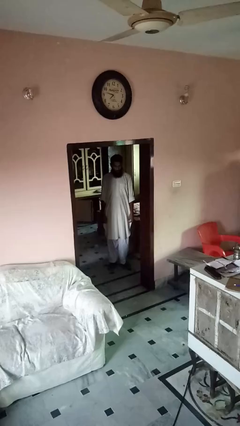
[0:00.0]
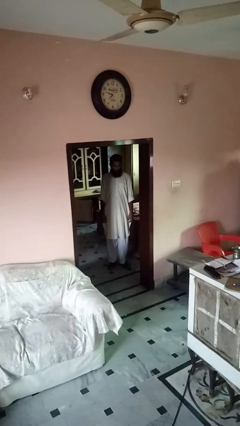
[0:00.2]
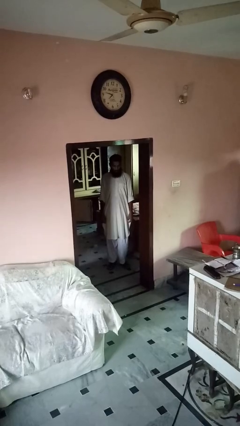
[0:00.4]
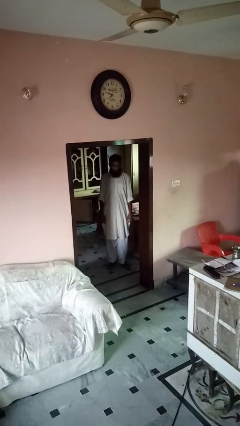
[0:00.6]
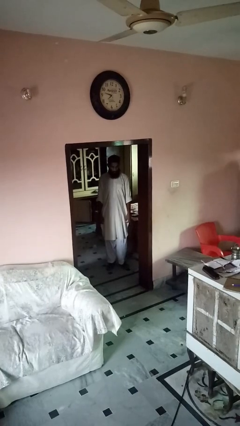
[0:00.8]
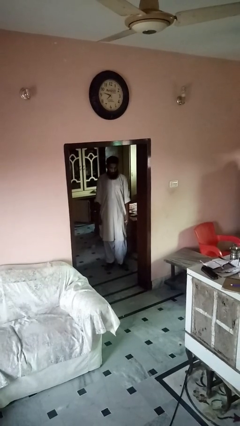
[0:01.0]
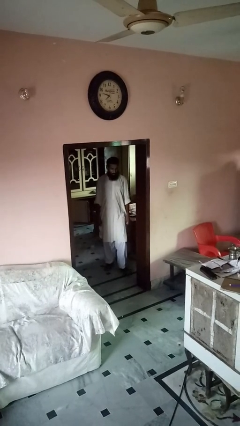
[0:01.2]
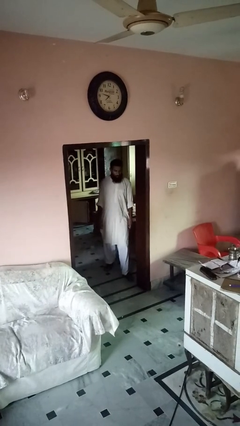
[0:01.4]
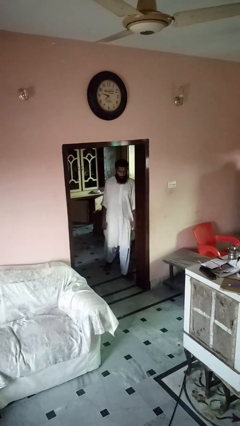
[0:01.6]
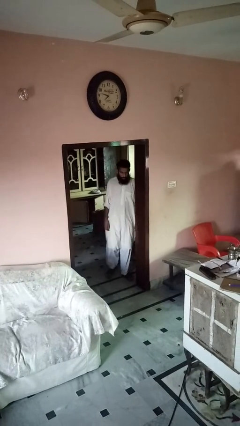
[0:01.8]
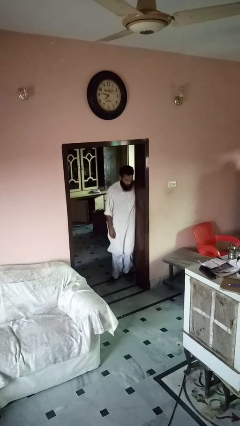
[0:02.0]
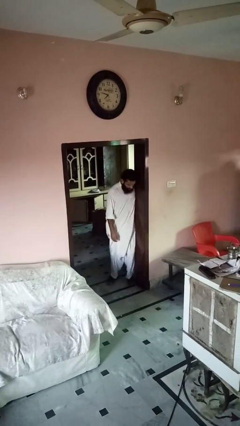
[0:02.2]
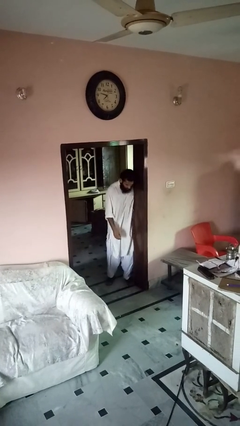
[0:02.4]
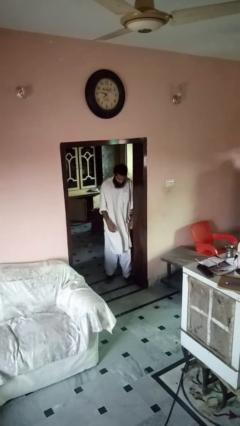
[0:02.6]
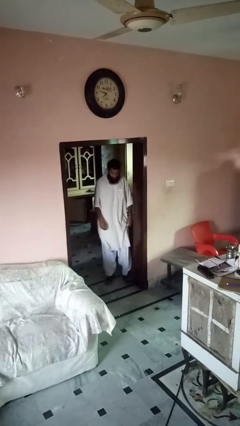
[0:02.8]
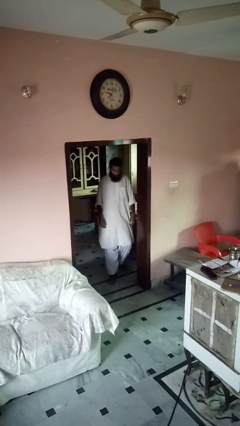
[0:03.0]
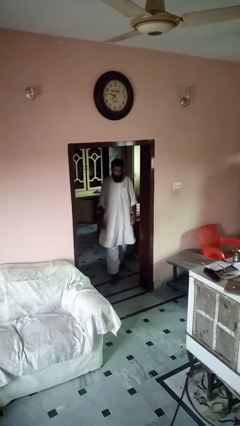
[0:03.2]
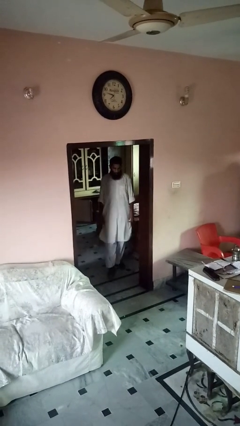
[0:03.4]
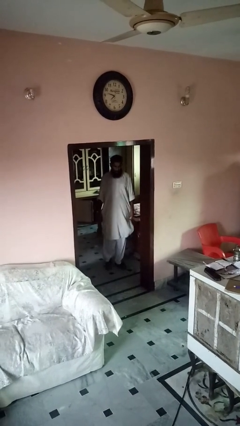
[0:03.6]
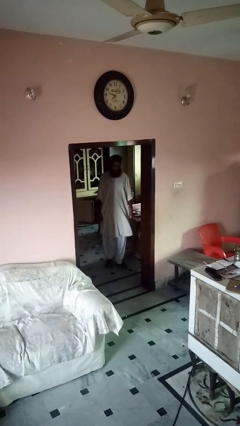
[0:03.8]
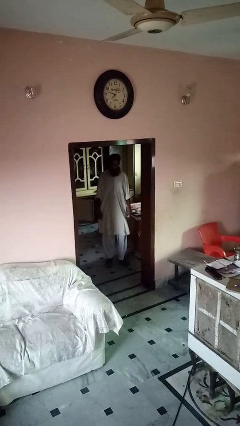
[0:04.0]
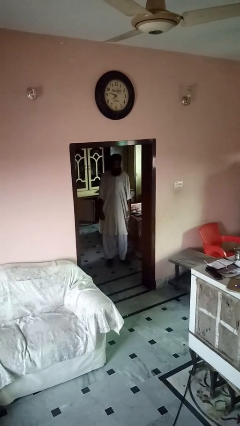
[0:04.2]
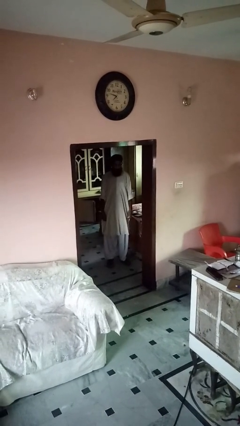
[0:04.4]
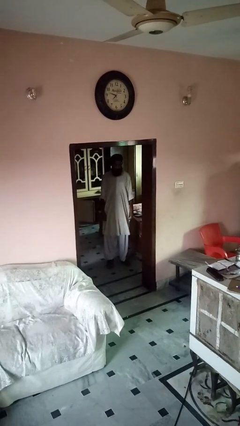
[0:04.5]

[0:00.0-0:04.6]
person bumps into wall

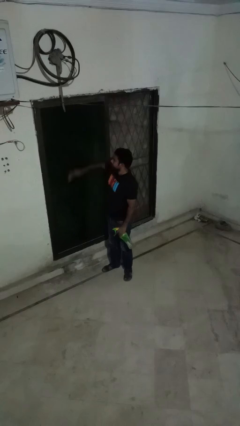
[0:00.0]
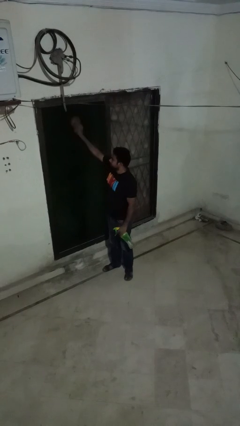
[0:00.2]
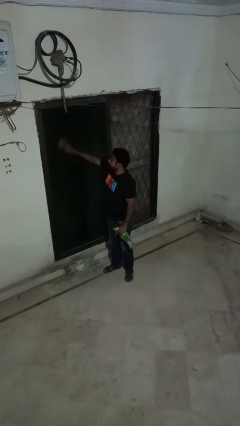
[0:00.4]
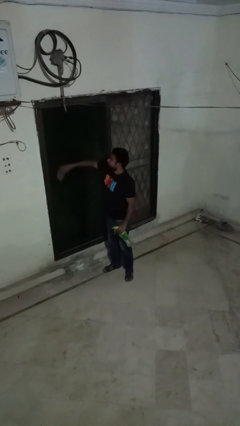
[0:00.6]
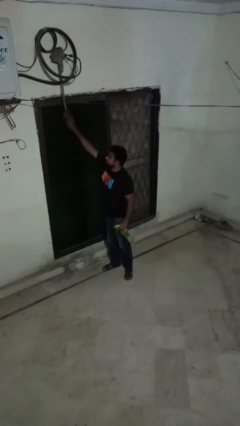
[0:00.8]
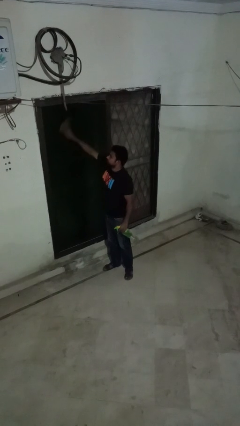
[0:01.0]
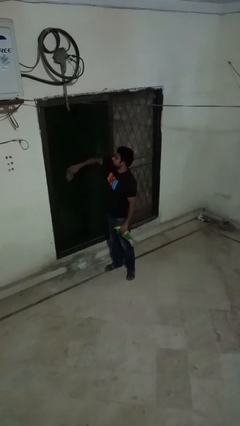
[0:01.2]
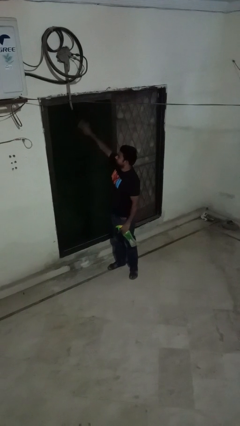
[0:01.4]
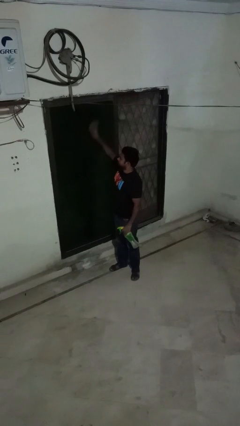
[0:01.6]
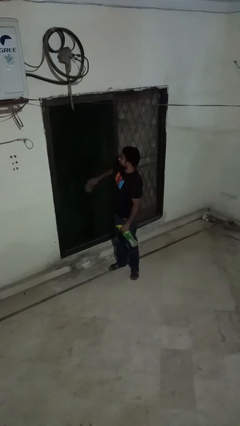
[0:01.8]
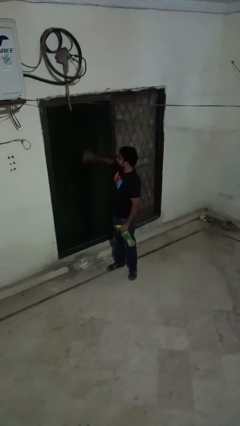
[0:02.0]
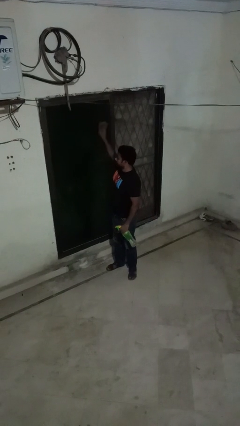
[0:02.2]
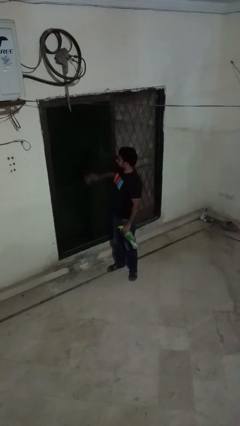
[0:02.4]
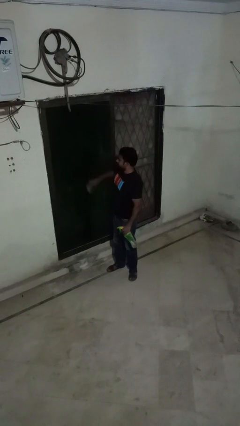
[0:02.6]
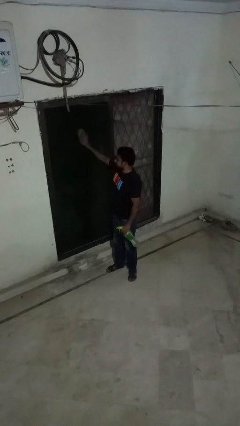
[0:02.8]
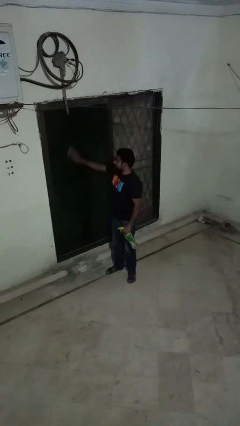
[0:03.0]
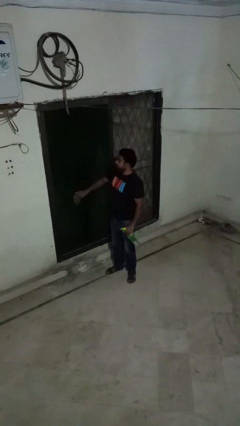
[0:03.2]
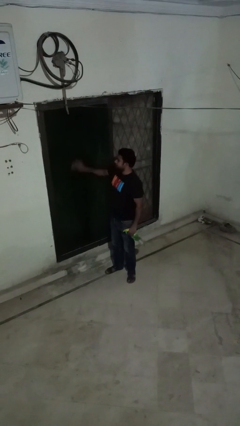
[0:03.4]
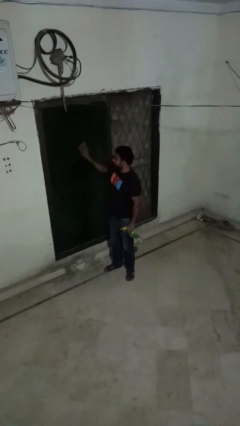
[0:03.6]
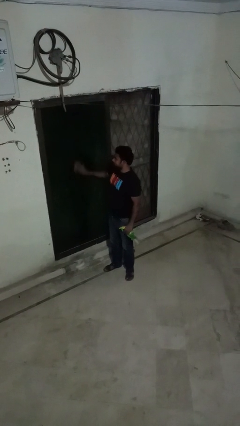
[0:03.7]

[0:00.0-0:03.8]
person washes window

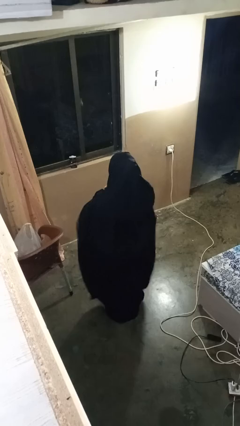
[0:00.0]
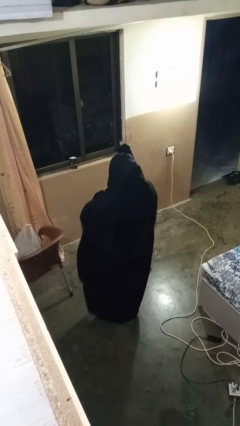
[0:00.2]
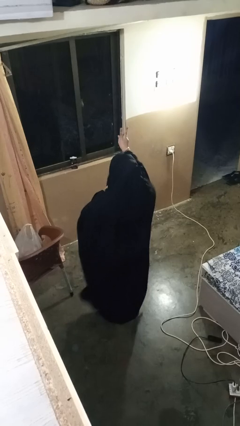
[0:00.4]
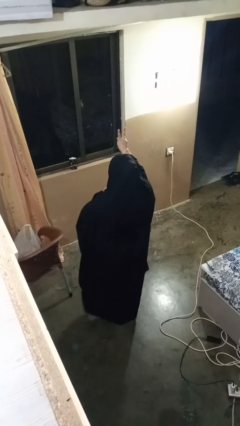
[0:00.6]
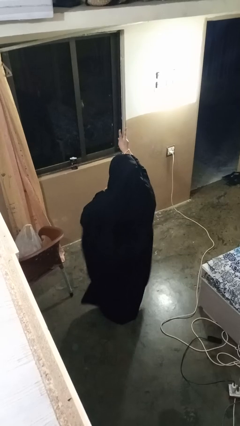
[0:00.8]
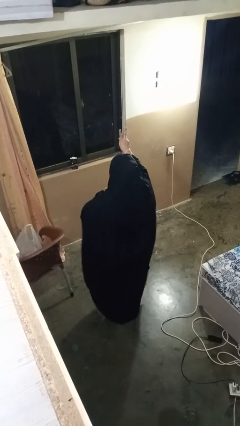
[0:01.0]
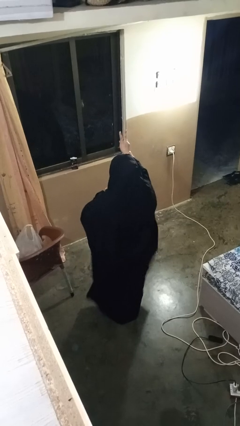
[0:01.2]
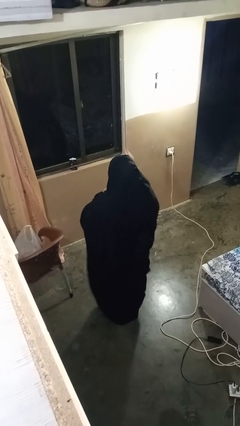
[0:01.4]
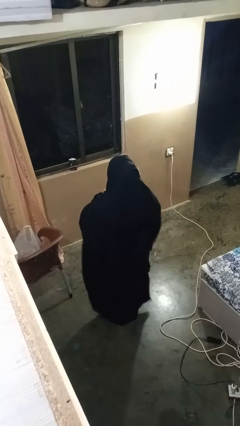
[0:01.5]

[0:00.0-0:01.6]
person gestures peace

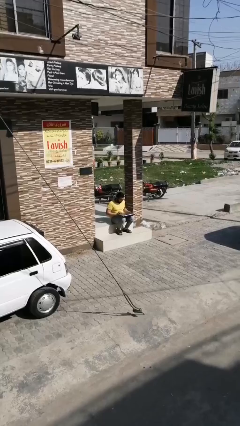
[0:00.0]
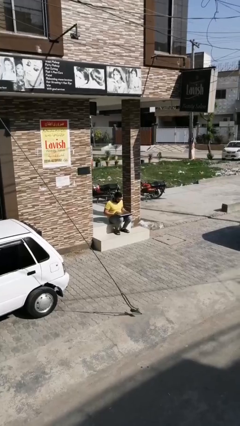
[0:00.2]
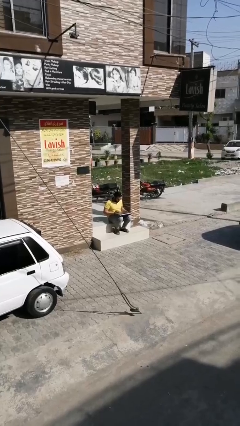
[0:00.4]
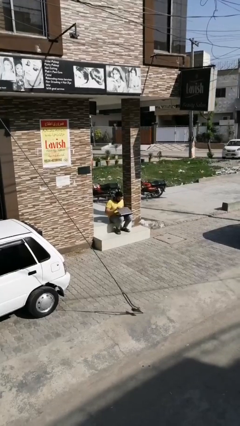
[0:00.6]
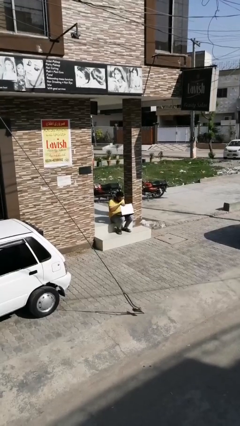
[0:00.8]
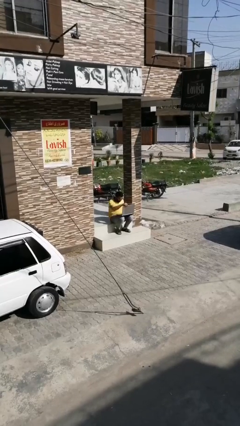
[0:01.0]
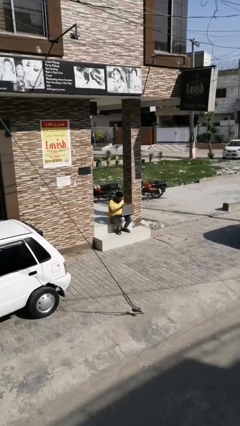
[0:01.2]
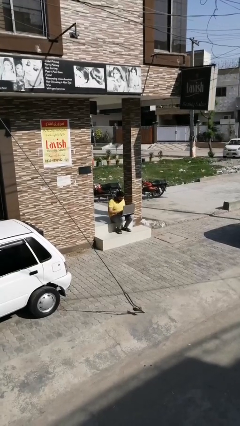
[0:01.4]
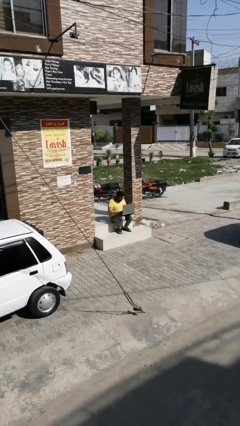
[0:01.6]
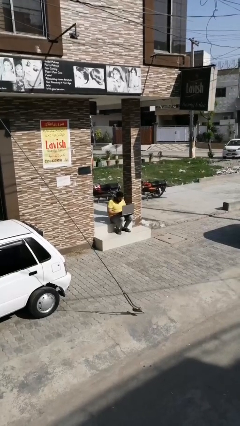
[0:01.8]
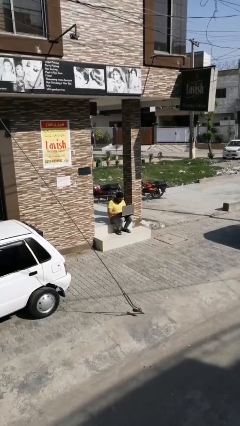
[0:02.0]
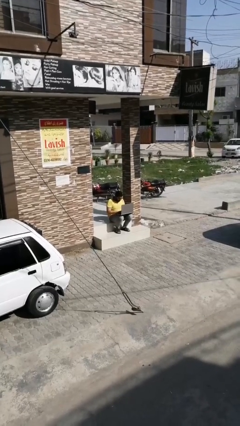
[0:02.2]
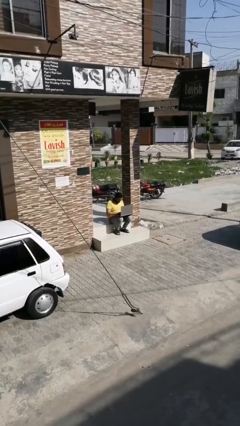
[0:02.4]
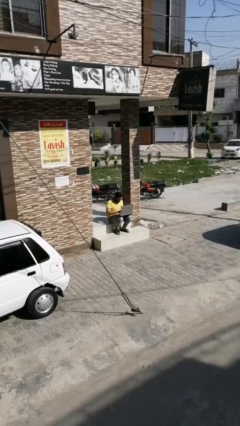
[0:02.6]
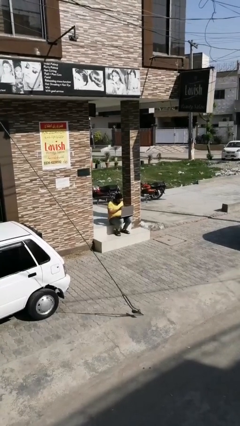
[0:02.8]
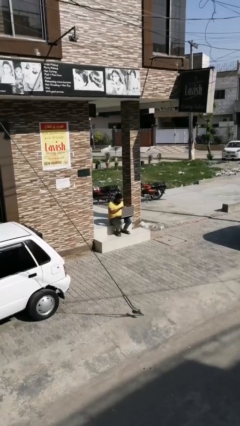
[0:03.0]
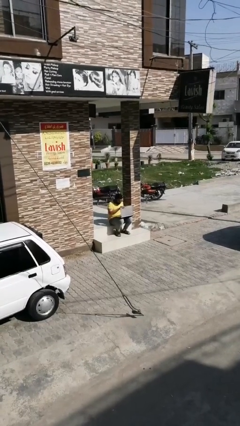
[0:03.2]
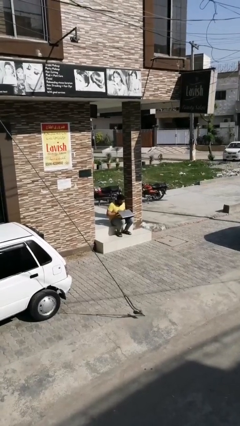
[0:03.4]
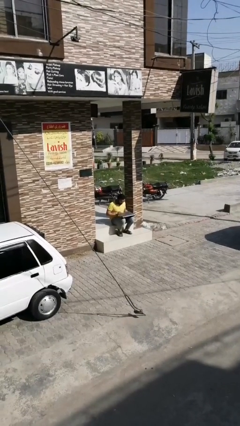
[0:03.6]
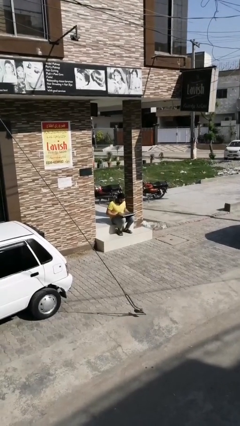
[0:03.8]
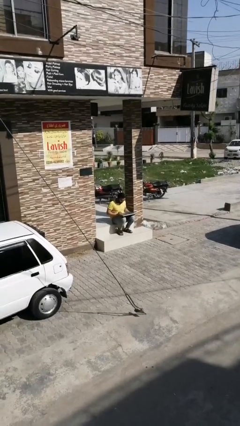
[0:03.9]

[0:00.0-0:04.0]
person interacts with laptop

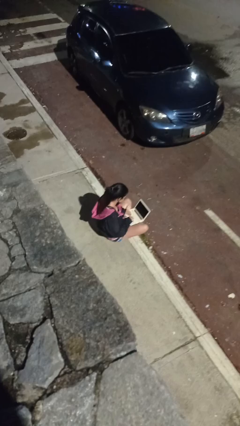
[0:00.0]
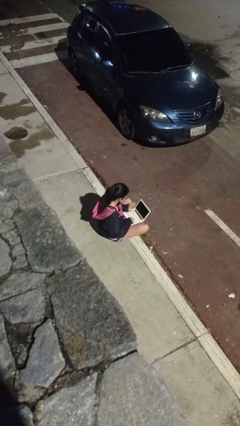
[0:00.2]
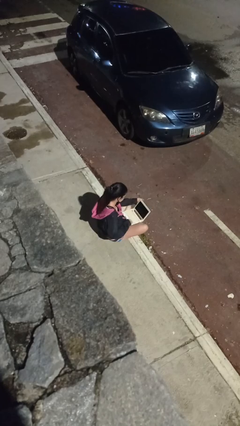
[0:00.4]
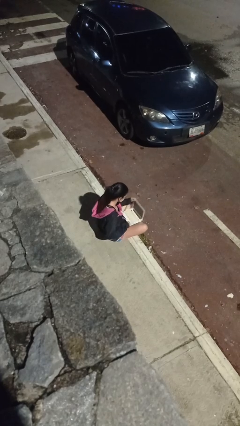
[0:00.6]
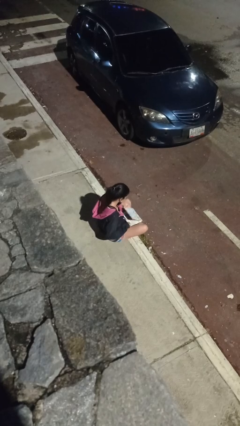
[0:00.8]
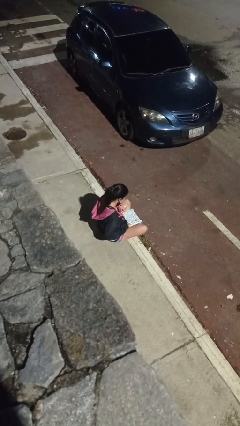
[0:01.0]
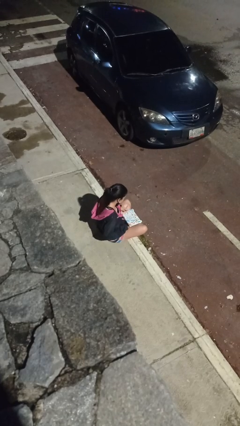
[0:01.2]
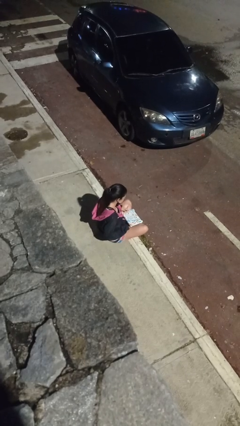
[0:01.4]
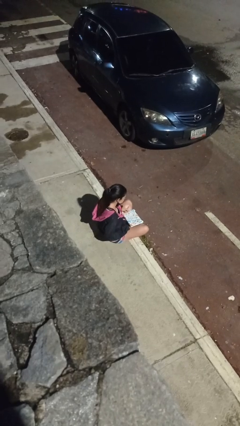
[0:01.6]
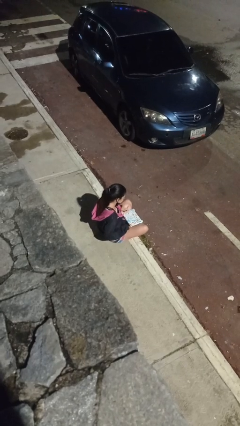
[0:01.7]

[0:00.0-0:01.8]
person closes laptop

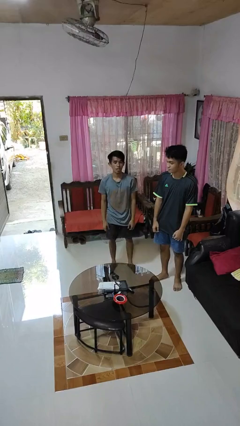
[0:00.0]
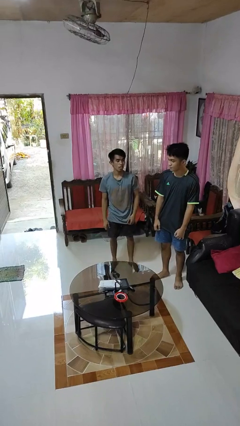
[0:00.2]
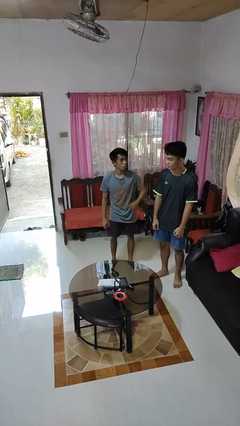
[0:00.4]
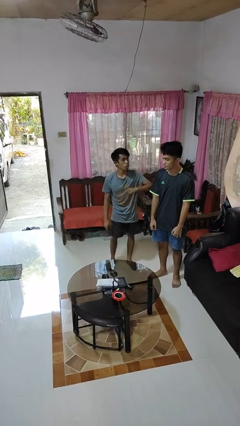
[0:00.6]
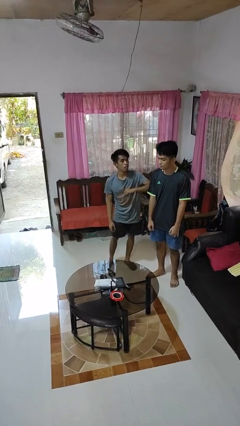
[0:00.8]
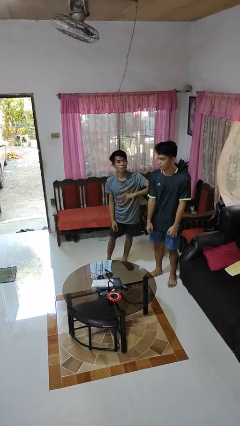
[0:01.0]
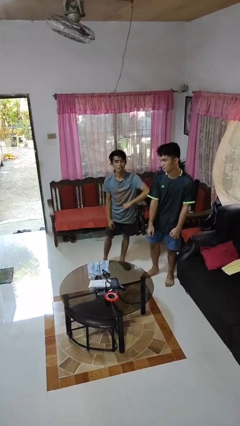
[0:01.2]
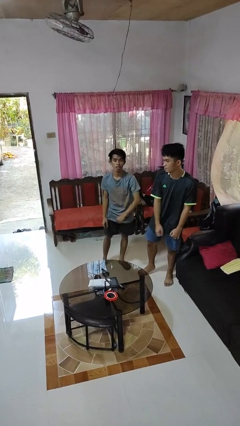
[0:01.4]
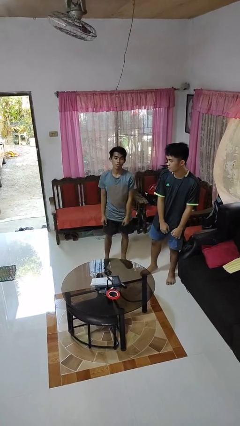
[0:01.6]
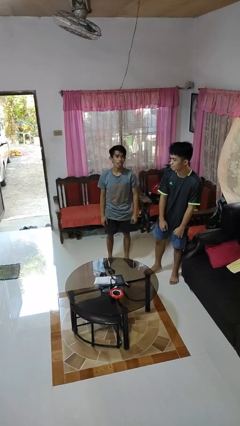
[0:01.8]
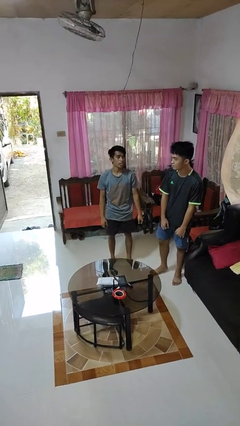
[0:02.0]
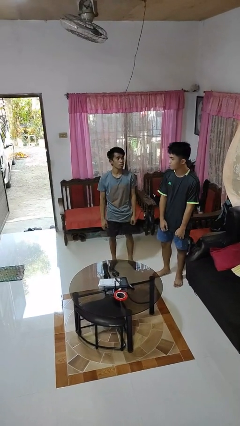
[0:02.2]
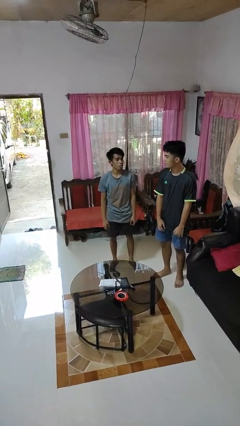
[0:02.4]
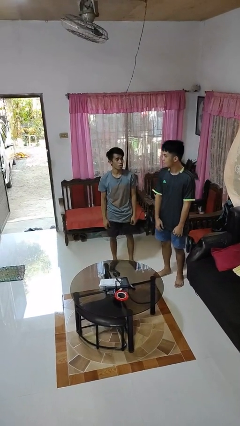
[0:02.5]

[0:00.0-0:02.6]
person nudges person with elbow
